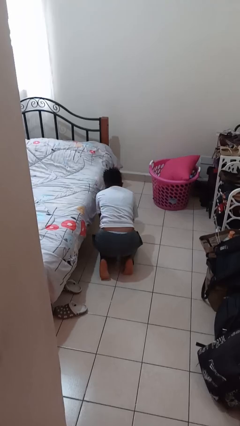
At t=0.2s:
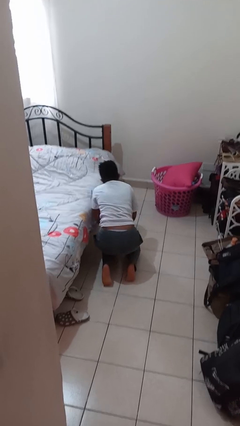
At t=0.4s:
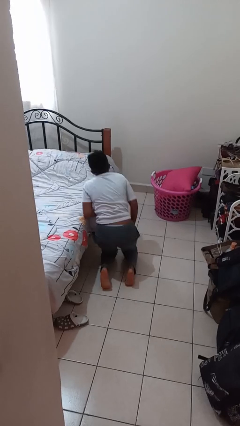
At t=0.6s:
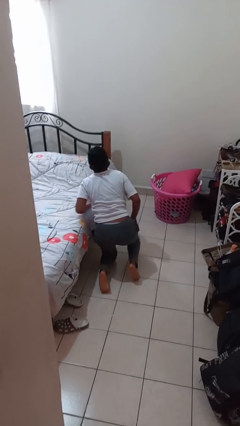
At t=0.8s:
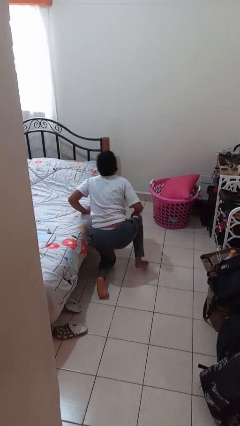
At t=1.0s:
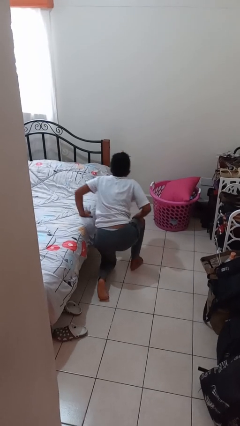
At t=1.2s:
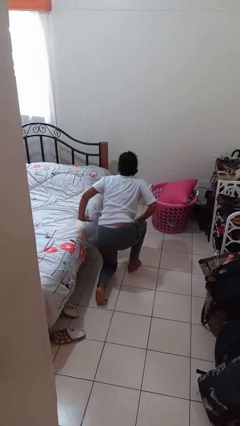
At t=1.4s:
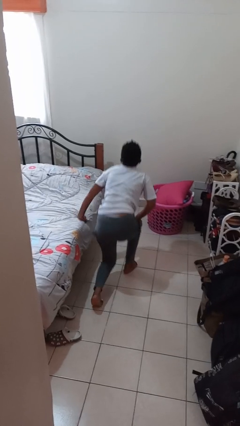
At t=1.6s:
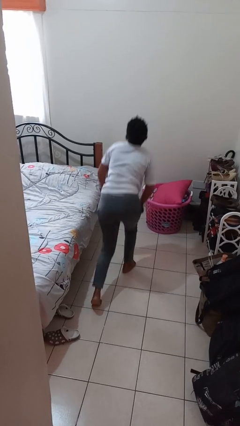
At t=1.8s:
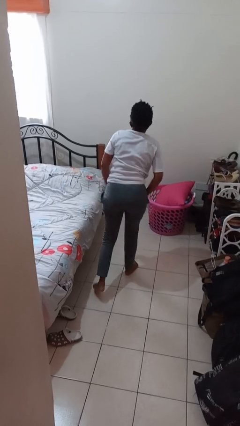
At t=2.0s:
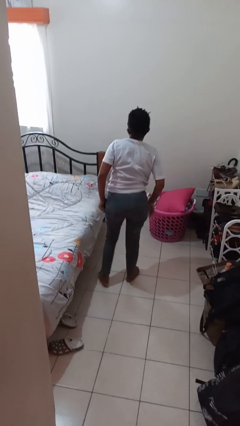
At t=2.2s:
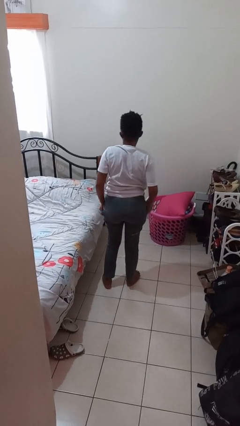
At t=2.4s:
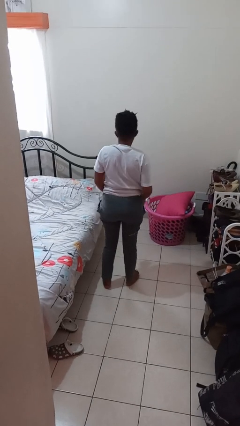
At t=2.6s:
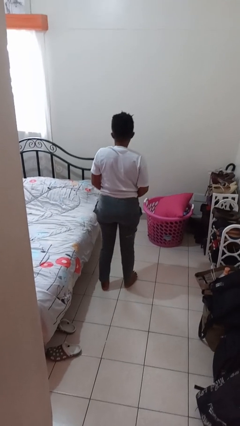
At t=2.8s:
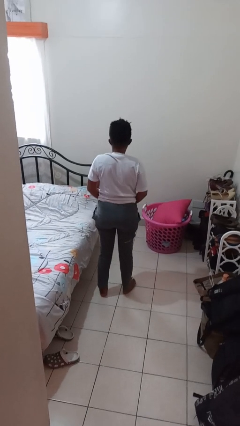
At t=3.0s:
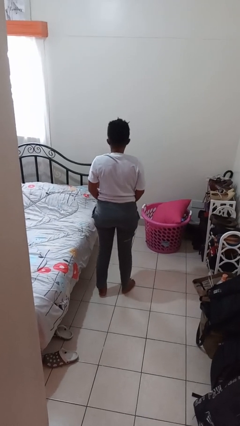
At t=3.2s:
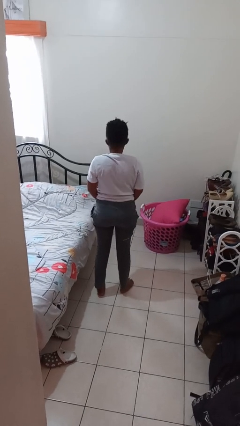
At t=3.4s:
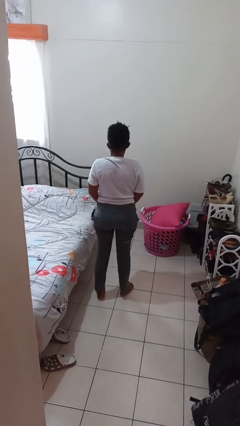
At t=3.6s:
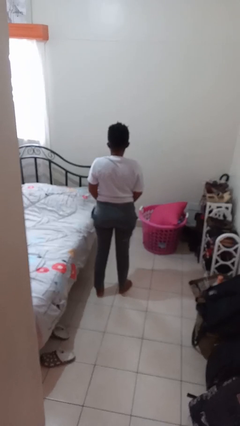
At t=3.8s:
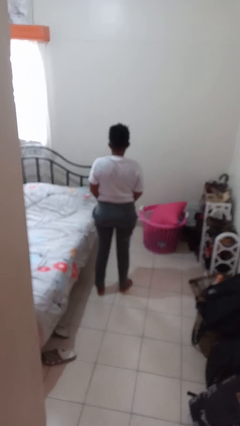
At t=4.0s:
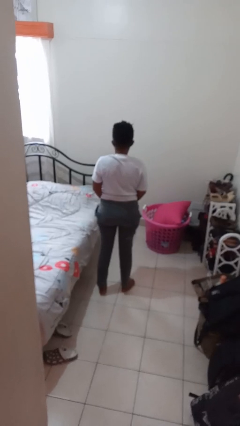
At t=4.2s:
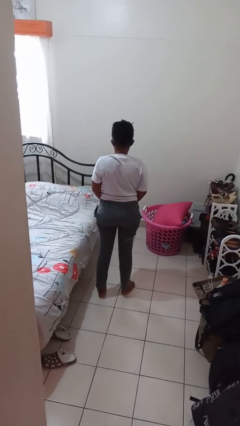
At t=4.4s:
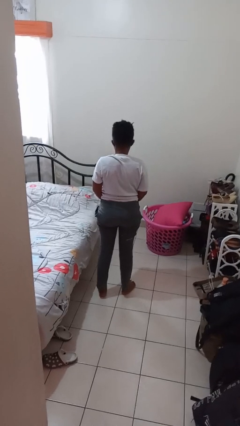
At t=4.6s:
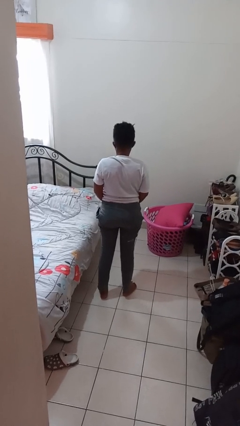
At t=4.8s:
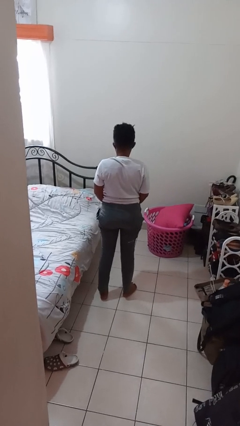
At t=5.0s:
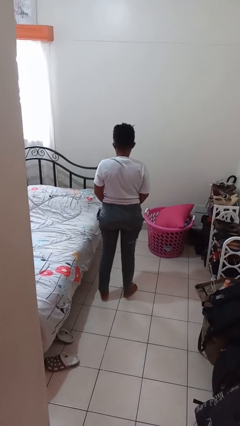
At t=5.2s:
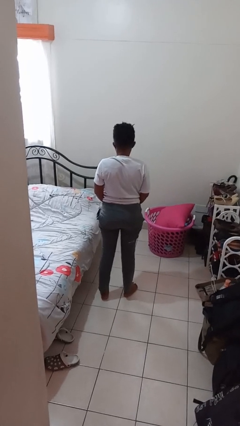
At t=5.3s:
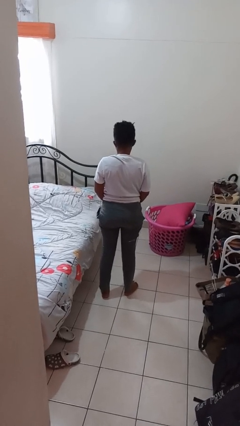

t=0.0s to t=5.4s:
person stands up from floor

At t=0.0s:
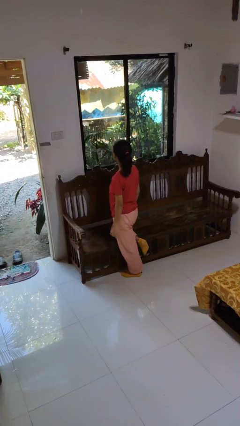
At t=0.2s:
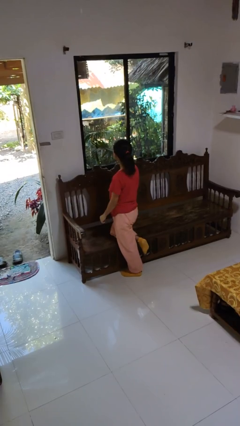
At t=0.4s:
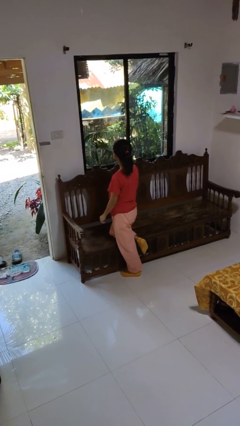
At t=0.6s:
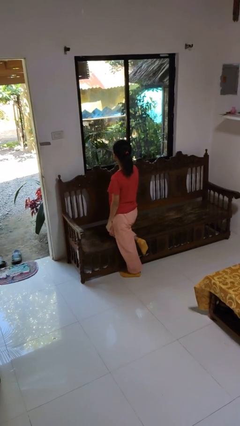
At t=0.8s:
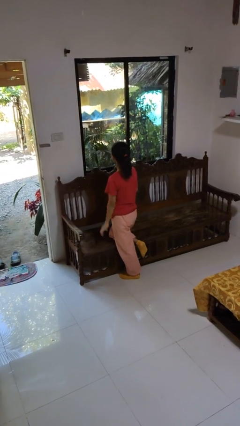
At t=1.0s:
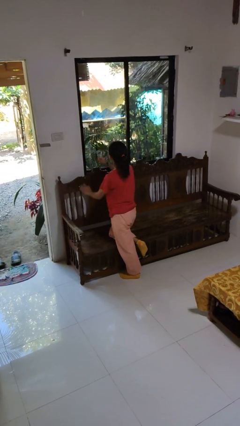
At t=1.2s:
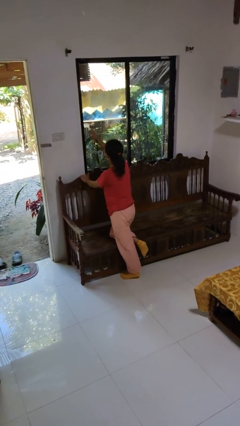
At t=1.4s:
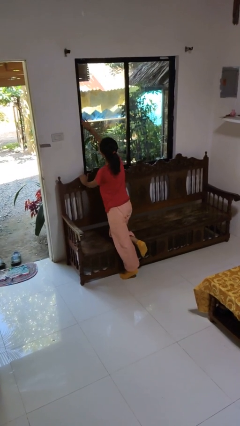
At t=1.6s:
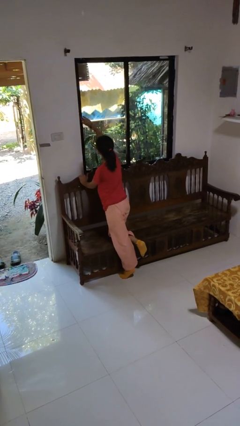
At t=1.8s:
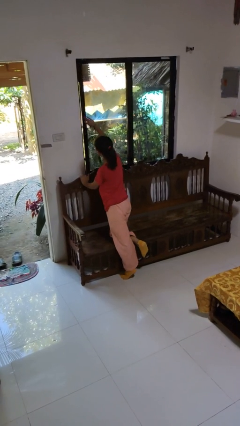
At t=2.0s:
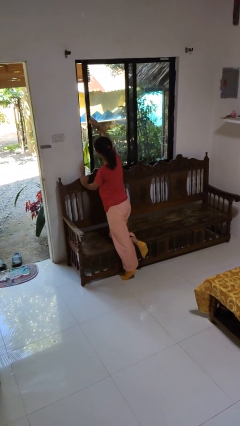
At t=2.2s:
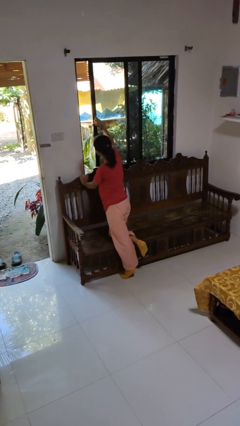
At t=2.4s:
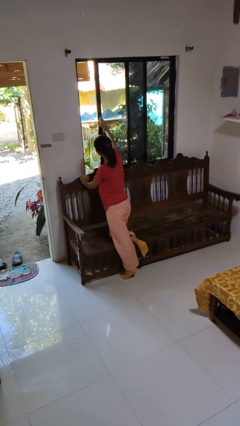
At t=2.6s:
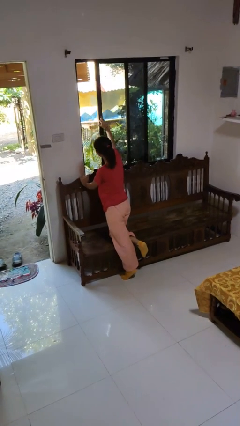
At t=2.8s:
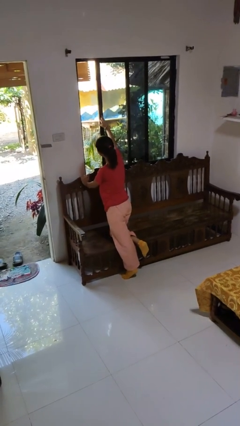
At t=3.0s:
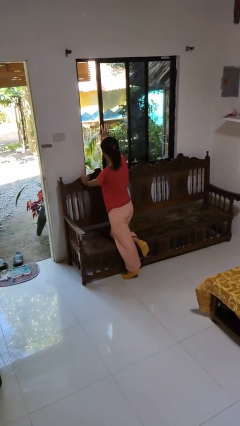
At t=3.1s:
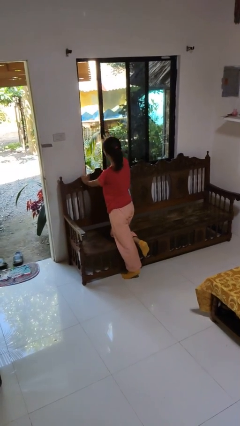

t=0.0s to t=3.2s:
person opens home window

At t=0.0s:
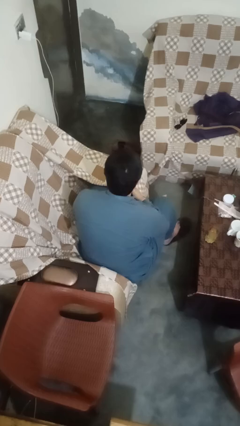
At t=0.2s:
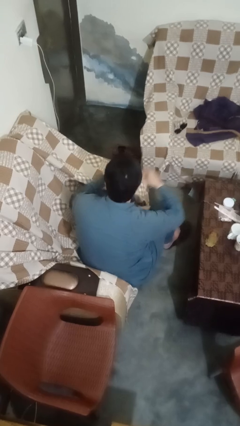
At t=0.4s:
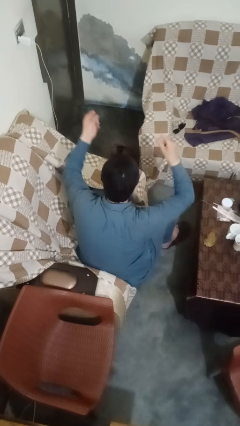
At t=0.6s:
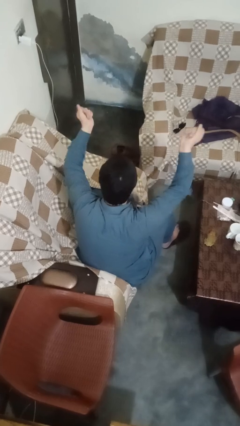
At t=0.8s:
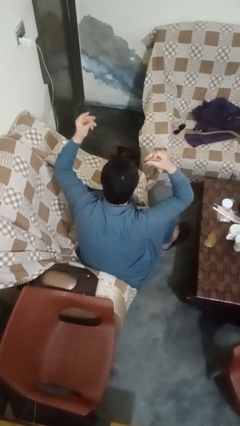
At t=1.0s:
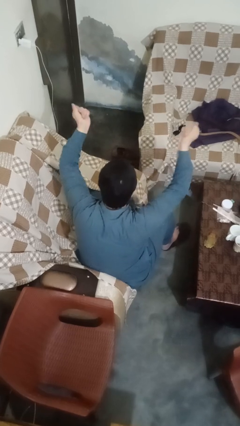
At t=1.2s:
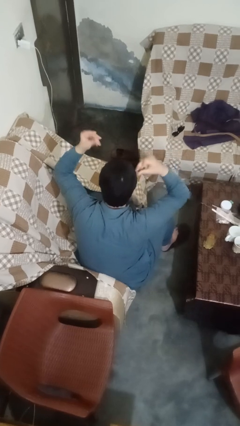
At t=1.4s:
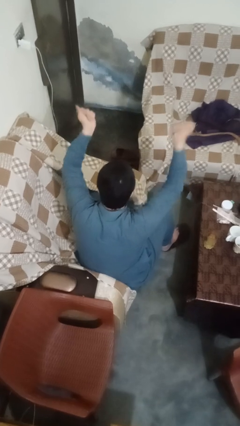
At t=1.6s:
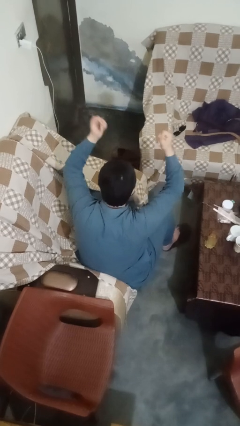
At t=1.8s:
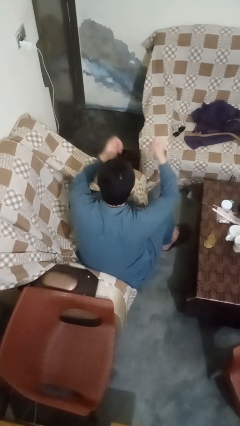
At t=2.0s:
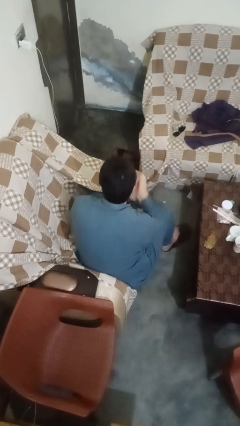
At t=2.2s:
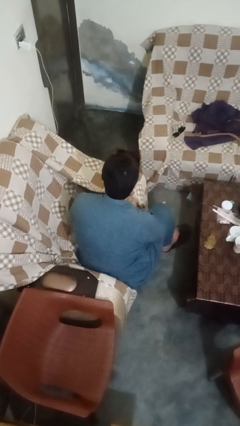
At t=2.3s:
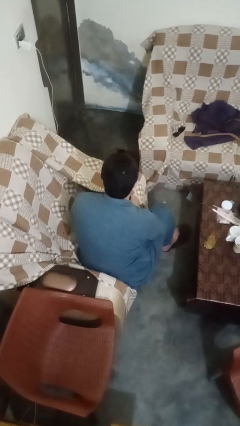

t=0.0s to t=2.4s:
person snaps fingers

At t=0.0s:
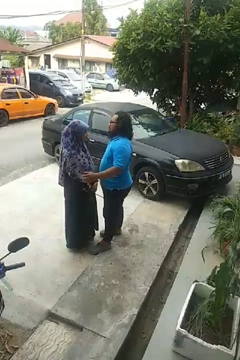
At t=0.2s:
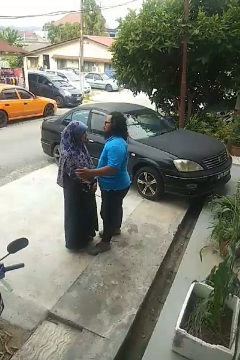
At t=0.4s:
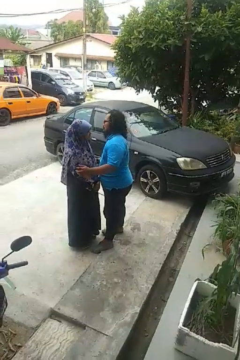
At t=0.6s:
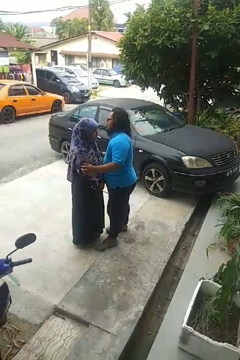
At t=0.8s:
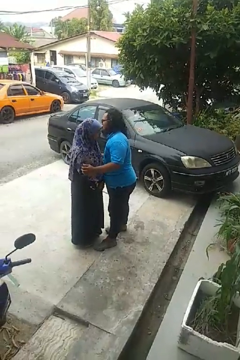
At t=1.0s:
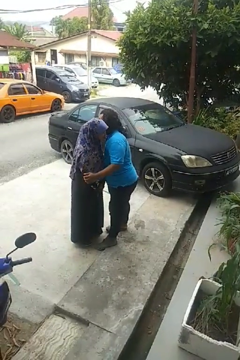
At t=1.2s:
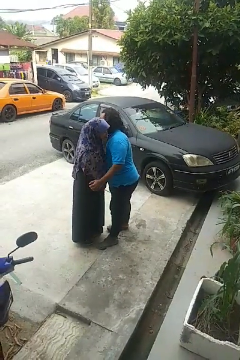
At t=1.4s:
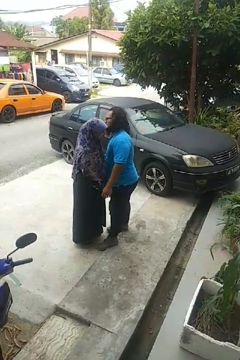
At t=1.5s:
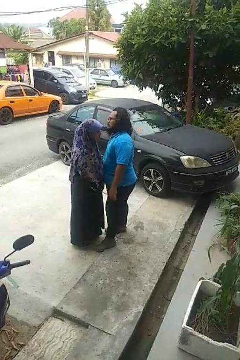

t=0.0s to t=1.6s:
person kisses cheek of person

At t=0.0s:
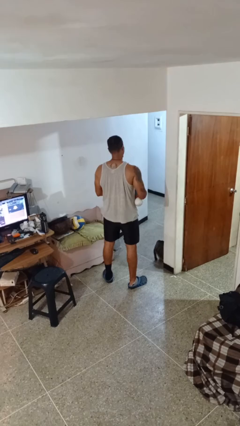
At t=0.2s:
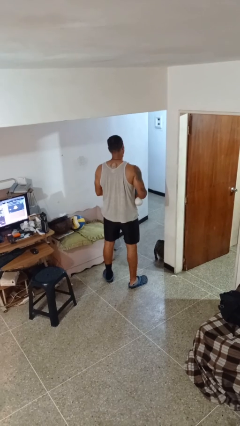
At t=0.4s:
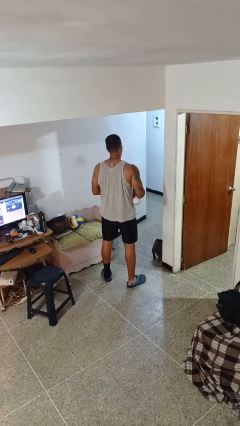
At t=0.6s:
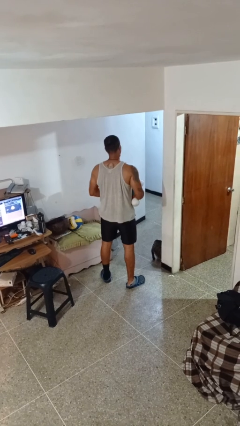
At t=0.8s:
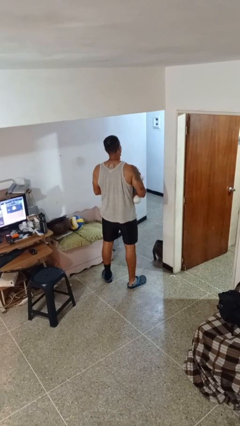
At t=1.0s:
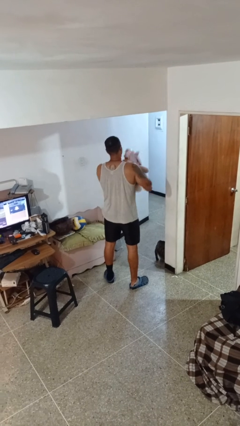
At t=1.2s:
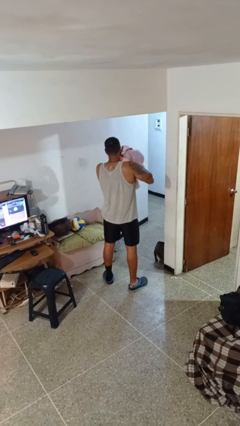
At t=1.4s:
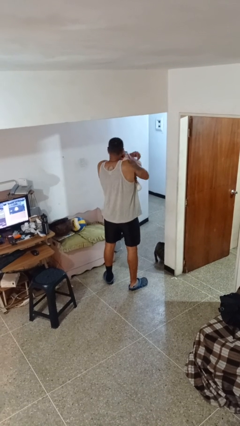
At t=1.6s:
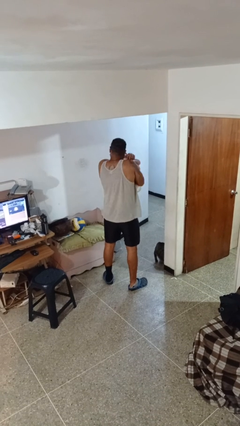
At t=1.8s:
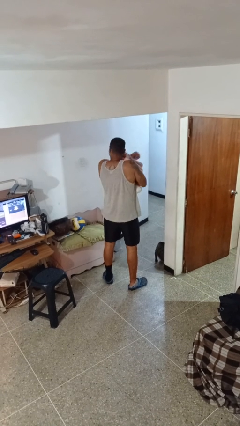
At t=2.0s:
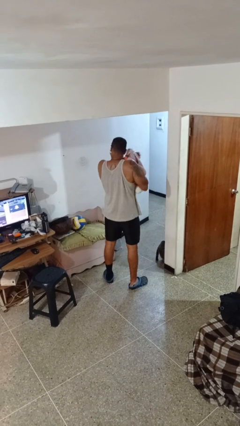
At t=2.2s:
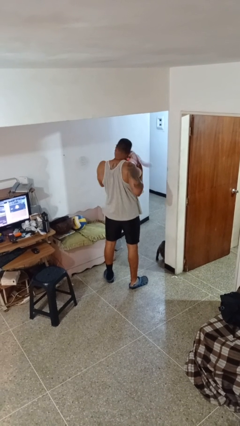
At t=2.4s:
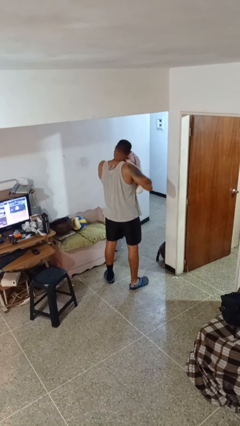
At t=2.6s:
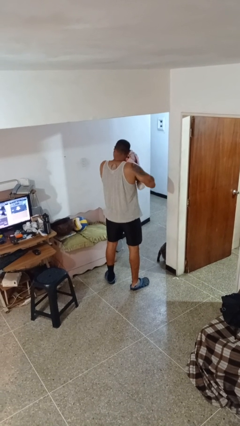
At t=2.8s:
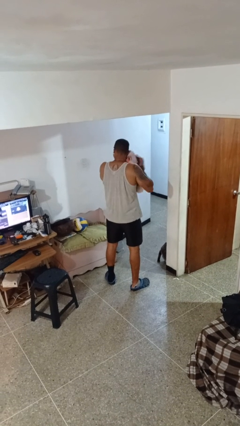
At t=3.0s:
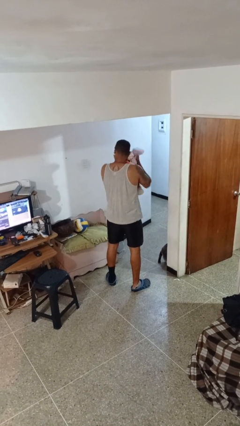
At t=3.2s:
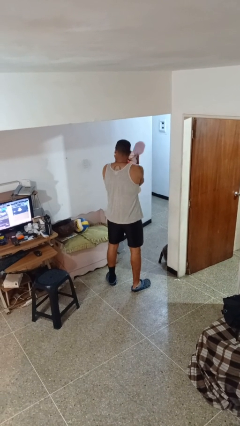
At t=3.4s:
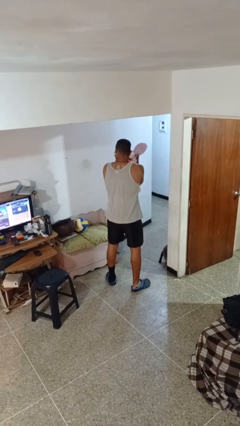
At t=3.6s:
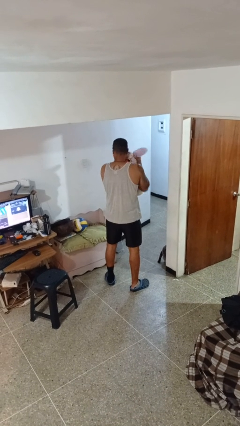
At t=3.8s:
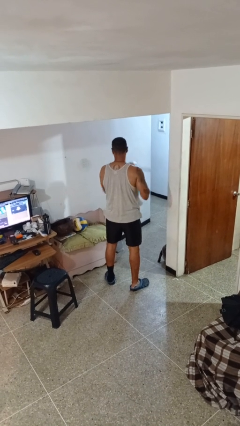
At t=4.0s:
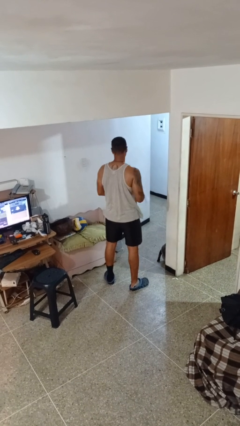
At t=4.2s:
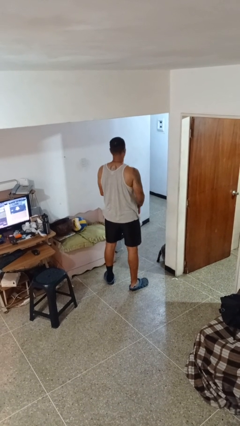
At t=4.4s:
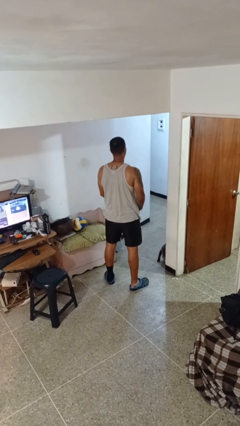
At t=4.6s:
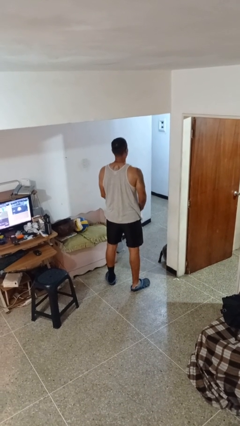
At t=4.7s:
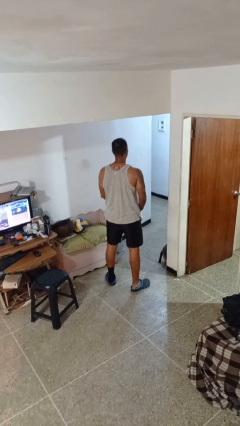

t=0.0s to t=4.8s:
person squeezes object

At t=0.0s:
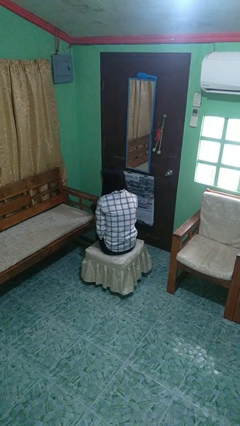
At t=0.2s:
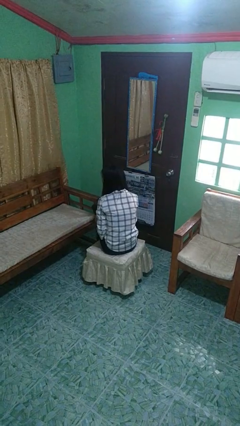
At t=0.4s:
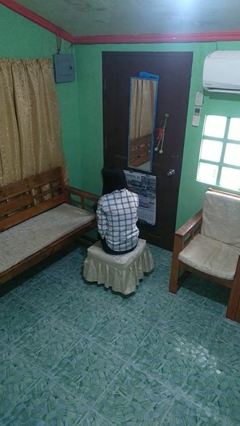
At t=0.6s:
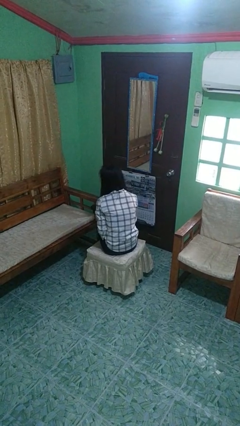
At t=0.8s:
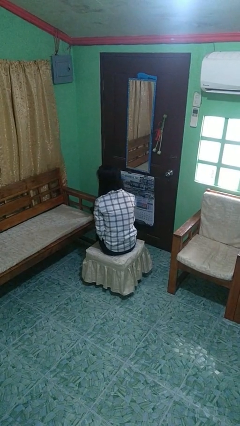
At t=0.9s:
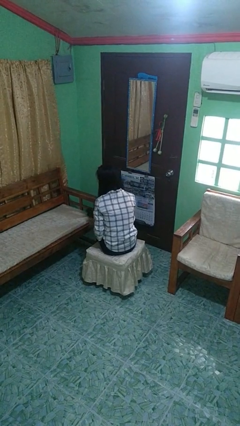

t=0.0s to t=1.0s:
person puts down object on couch
